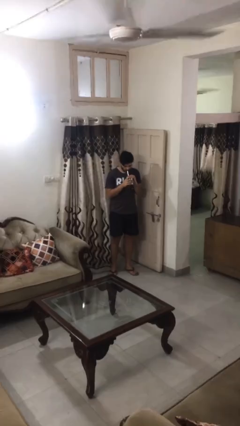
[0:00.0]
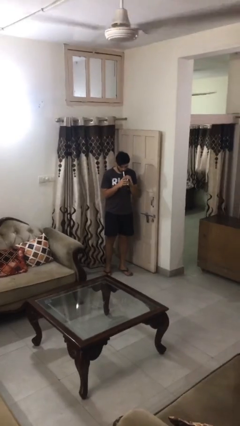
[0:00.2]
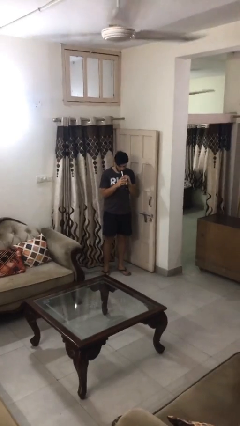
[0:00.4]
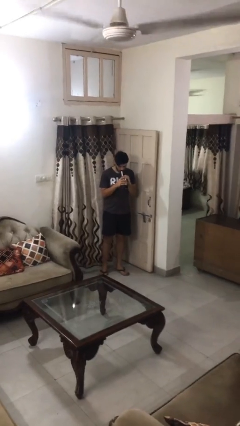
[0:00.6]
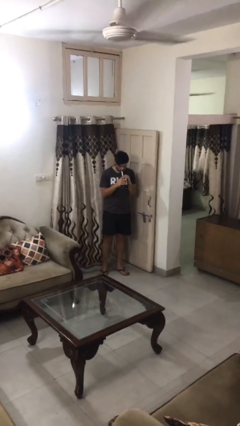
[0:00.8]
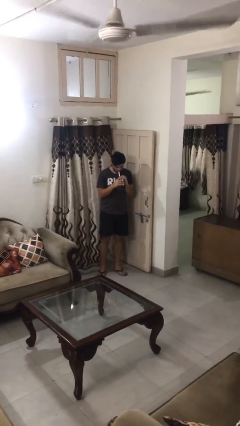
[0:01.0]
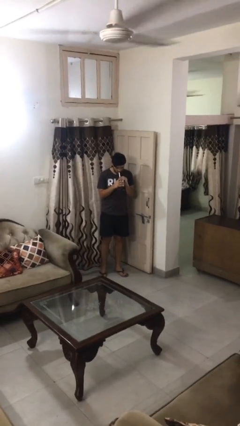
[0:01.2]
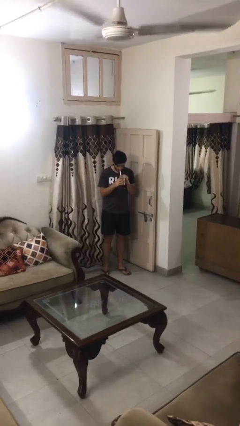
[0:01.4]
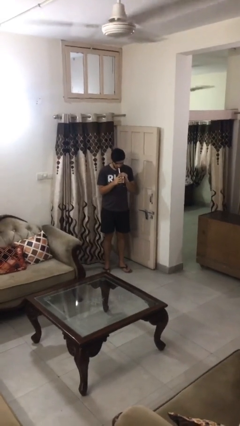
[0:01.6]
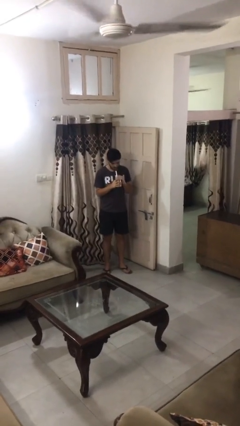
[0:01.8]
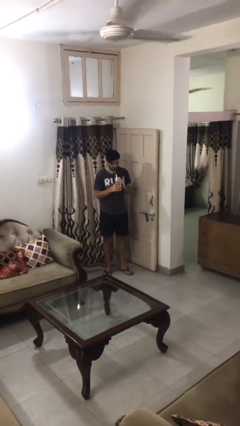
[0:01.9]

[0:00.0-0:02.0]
person drinks from straw

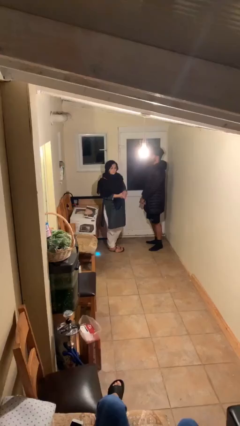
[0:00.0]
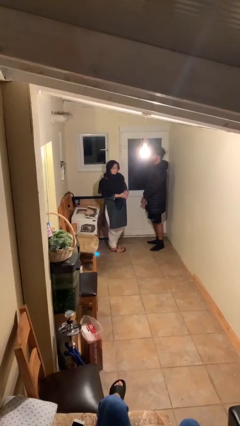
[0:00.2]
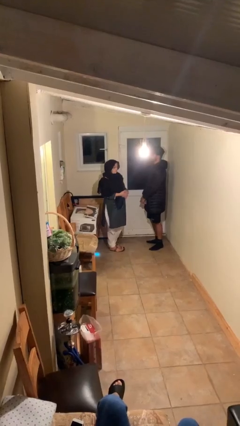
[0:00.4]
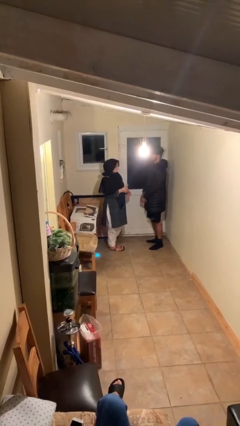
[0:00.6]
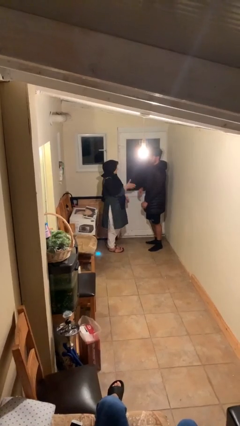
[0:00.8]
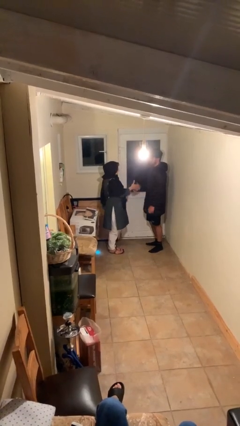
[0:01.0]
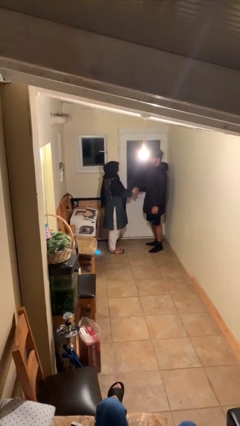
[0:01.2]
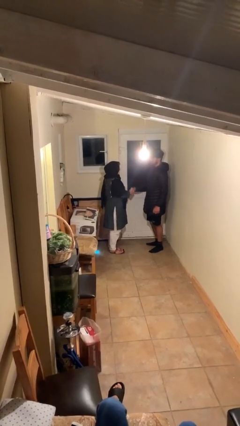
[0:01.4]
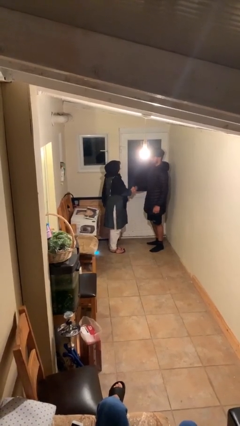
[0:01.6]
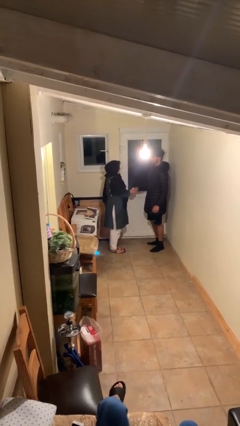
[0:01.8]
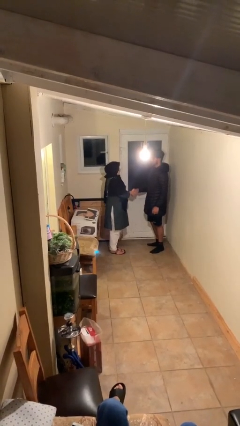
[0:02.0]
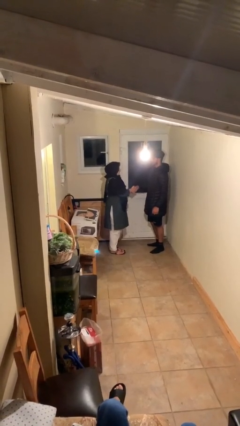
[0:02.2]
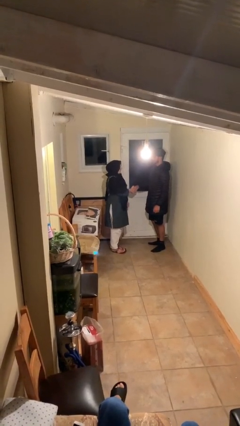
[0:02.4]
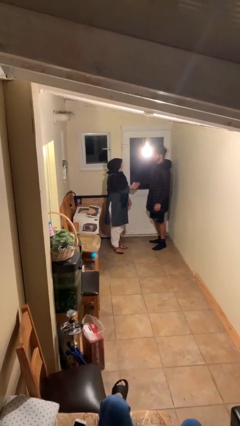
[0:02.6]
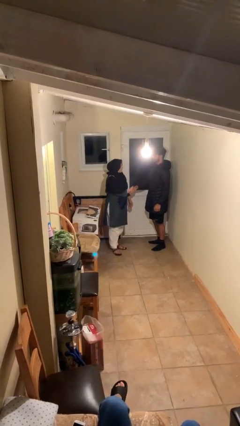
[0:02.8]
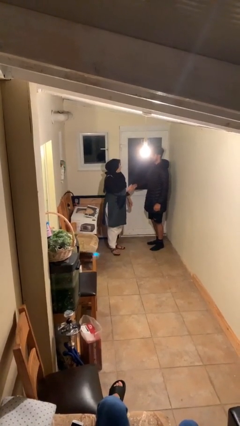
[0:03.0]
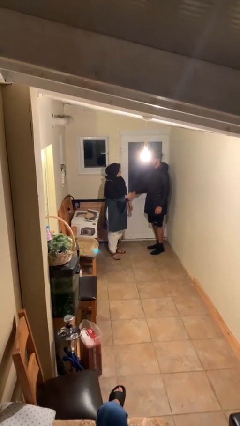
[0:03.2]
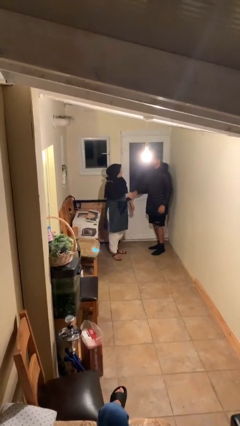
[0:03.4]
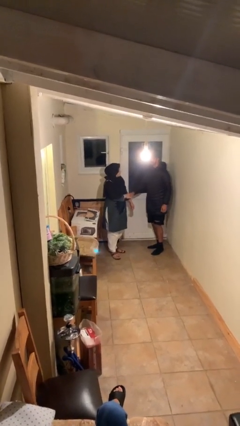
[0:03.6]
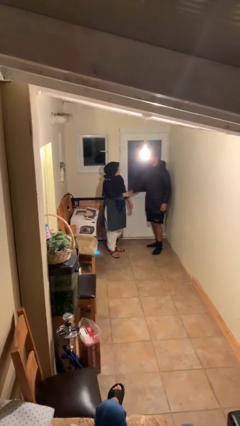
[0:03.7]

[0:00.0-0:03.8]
person shakes hand

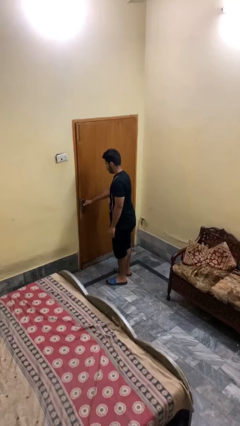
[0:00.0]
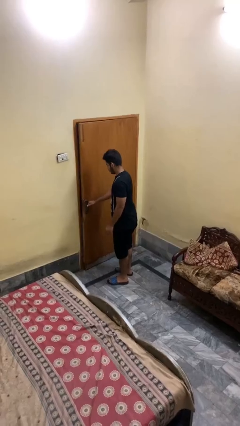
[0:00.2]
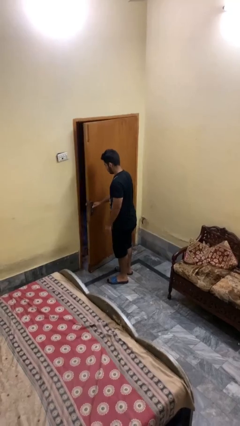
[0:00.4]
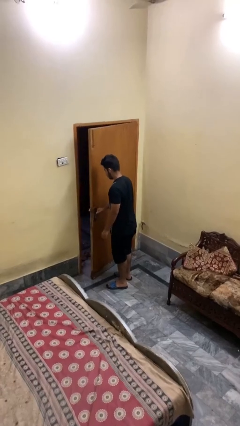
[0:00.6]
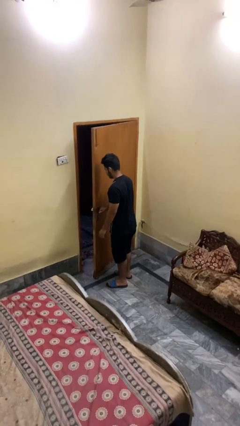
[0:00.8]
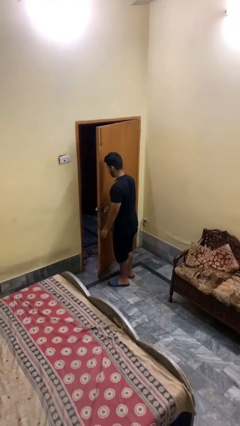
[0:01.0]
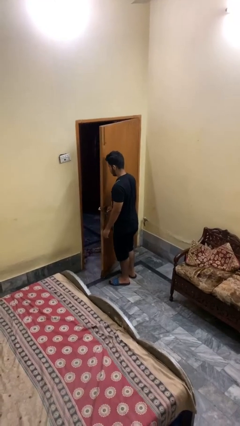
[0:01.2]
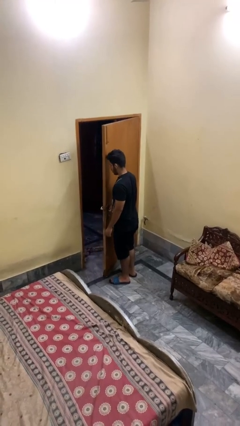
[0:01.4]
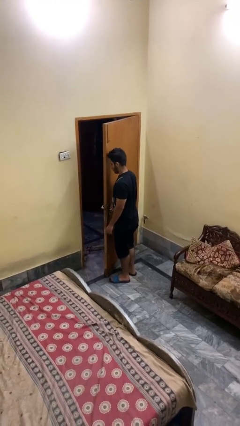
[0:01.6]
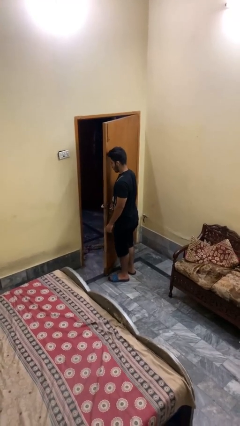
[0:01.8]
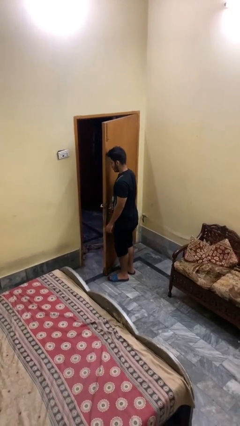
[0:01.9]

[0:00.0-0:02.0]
person opens facility door

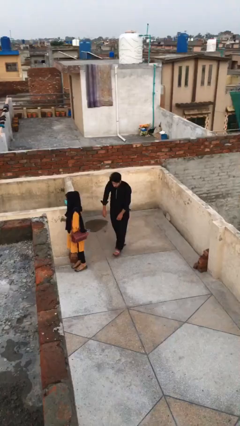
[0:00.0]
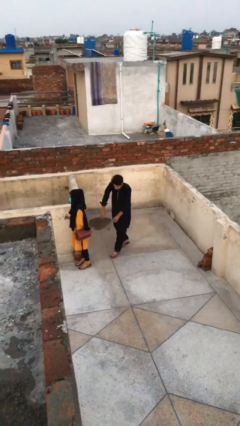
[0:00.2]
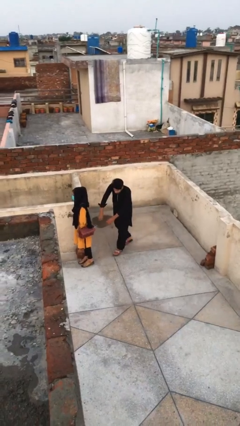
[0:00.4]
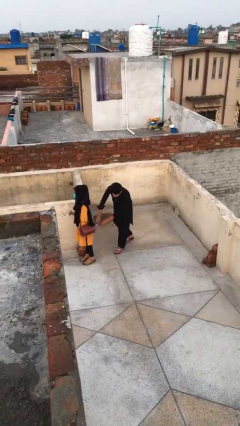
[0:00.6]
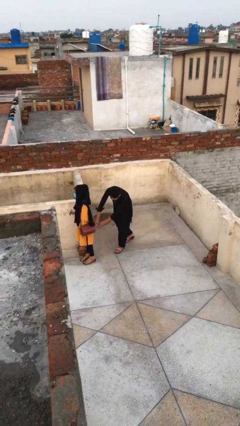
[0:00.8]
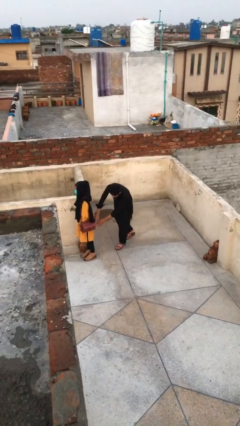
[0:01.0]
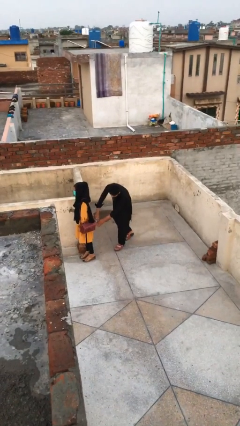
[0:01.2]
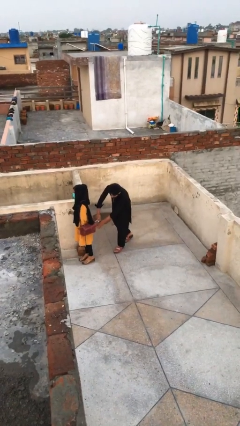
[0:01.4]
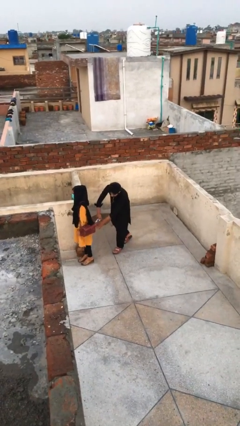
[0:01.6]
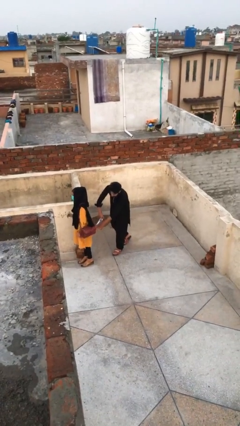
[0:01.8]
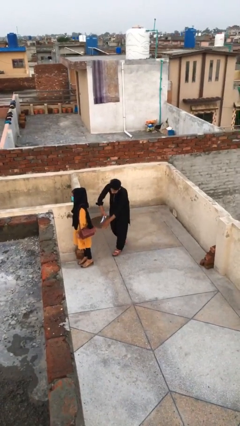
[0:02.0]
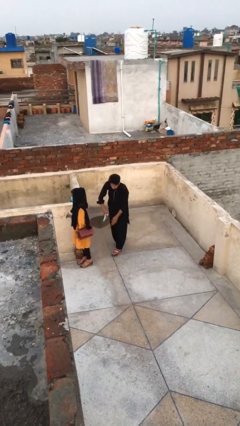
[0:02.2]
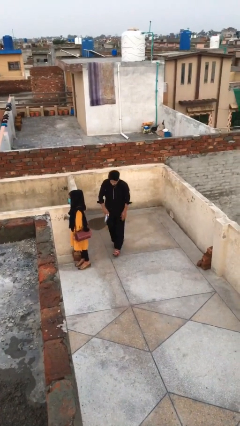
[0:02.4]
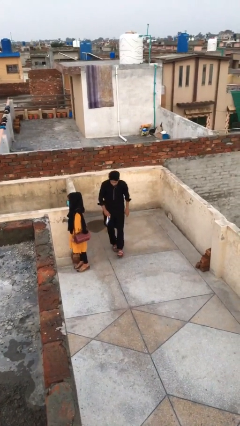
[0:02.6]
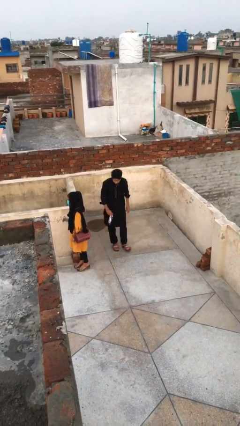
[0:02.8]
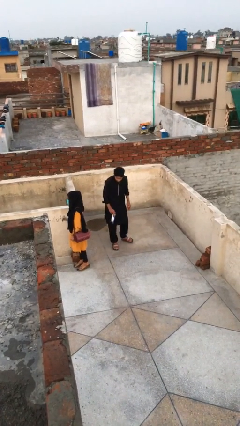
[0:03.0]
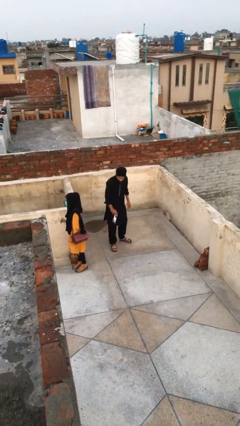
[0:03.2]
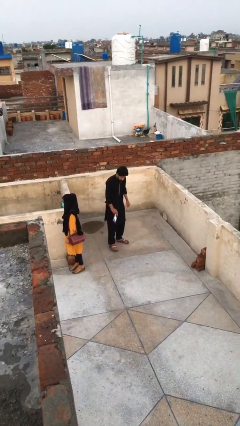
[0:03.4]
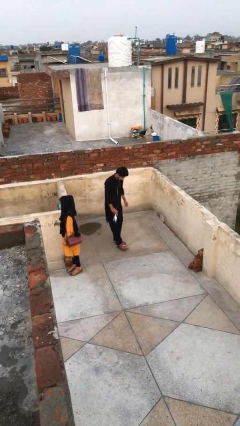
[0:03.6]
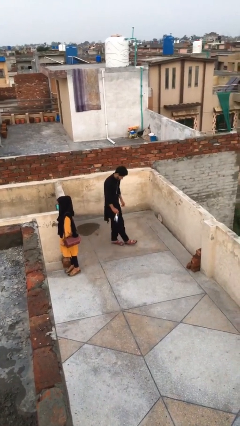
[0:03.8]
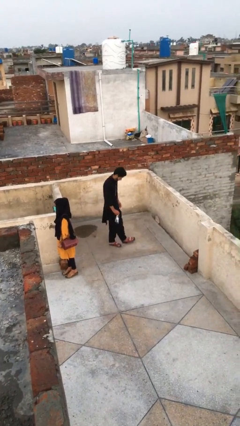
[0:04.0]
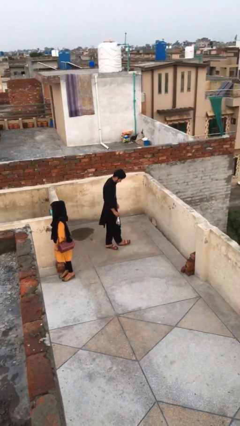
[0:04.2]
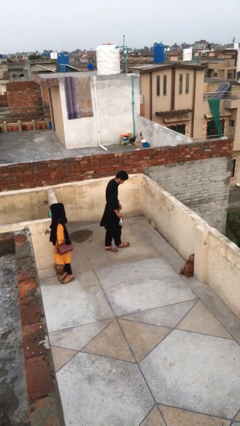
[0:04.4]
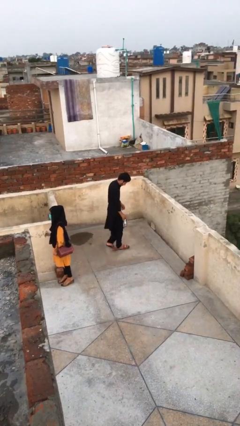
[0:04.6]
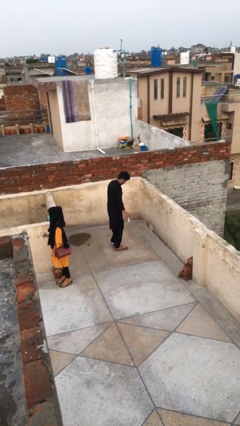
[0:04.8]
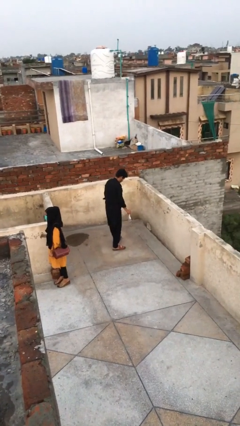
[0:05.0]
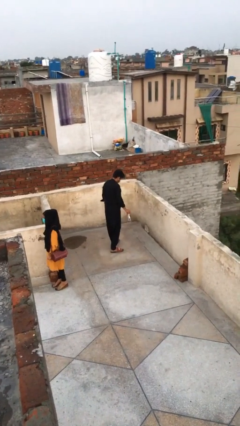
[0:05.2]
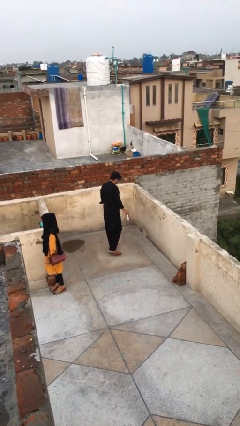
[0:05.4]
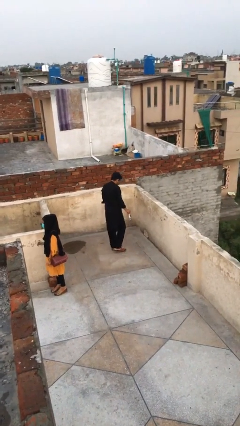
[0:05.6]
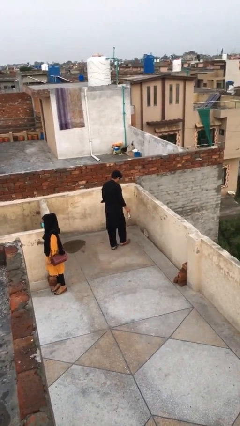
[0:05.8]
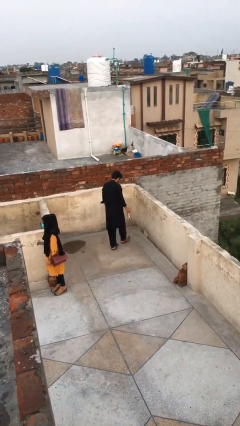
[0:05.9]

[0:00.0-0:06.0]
person steals object from person

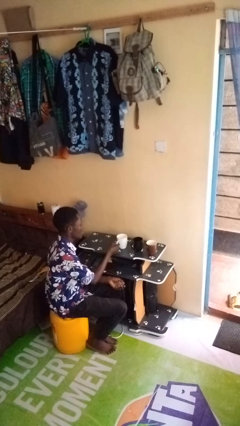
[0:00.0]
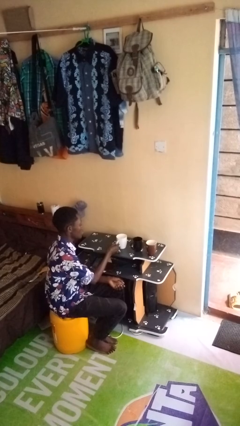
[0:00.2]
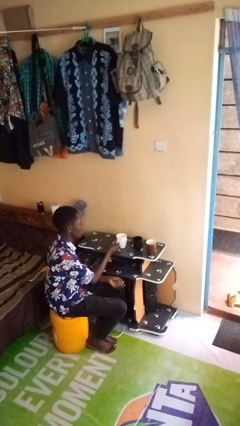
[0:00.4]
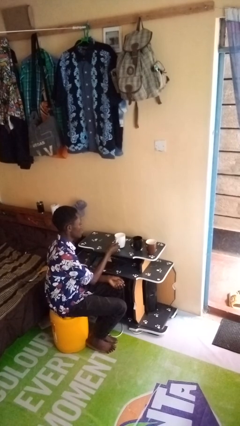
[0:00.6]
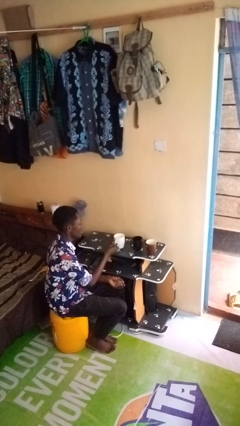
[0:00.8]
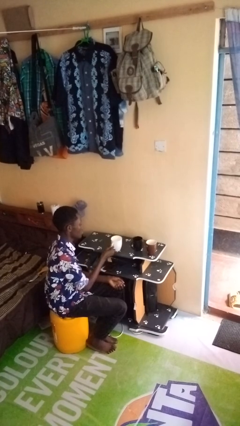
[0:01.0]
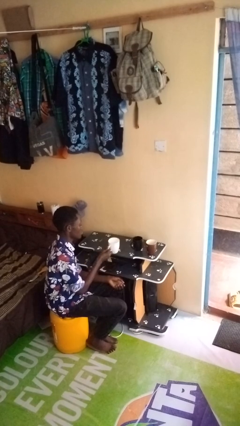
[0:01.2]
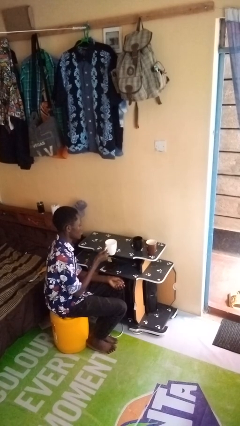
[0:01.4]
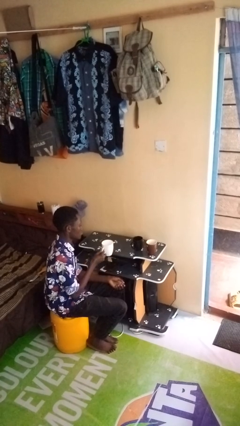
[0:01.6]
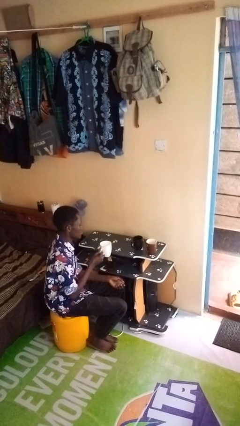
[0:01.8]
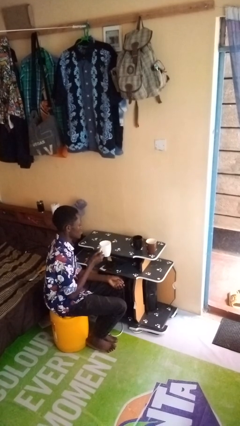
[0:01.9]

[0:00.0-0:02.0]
person picks up object from table

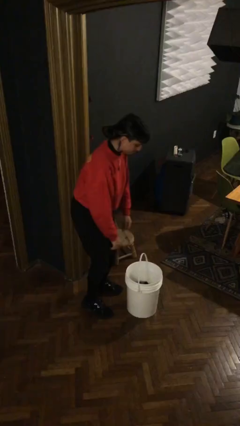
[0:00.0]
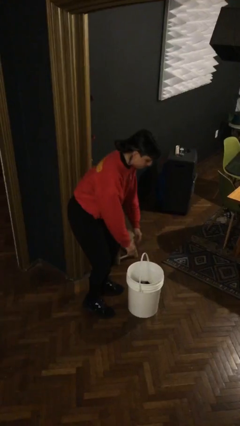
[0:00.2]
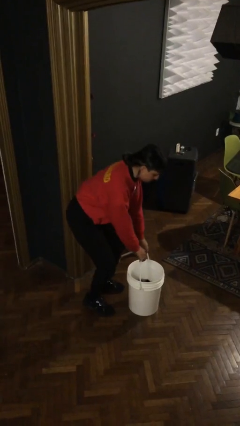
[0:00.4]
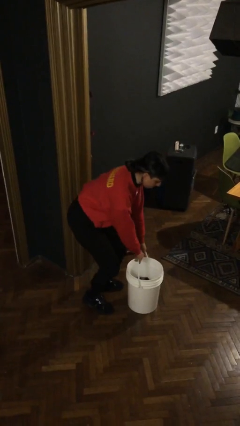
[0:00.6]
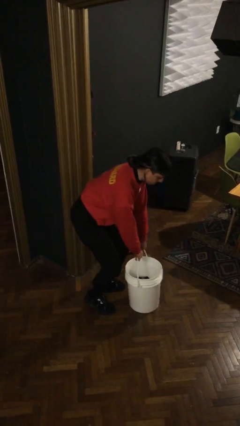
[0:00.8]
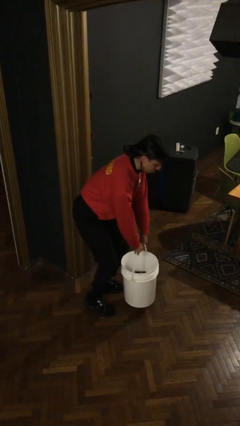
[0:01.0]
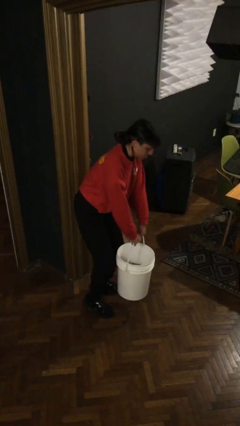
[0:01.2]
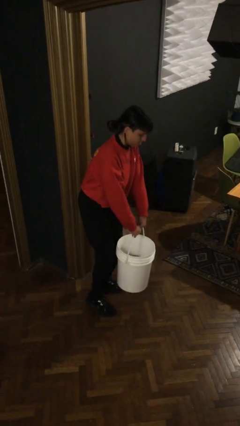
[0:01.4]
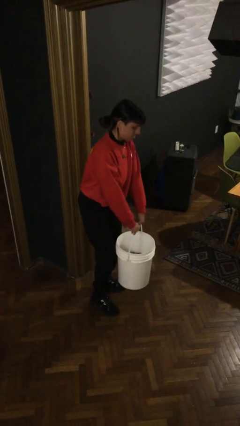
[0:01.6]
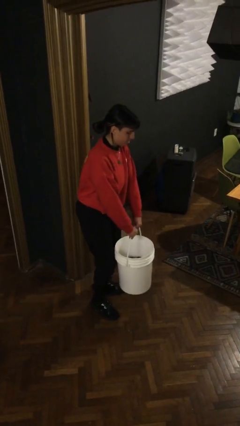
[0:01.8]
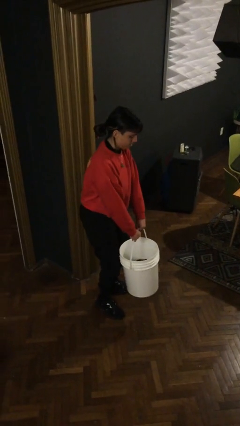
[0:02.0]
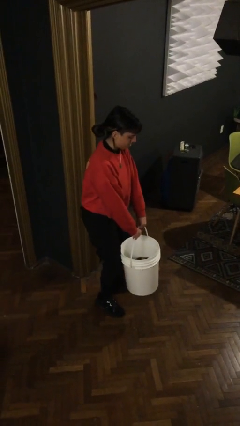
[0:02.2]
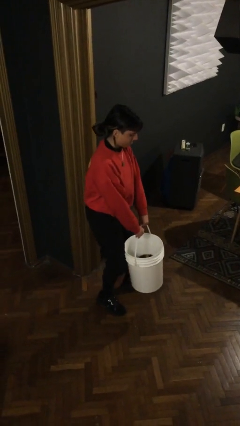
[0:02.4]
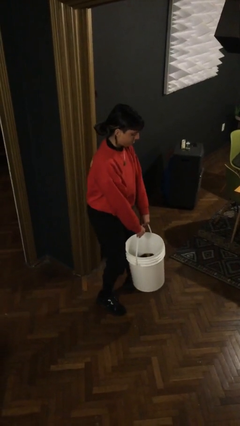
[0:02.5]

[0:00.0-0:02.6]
person picks up object from floor
